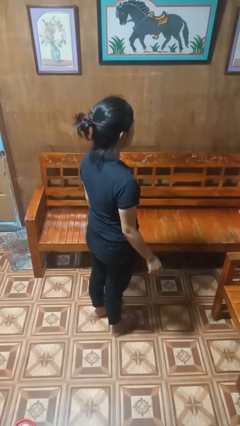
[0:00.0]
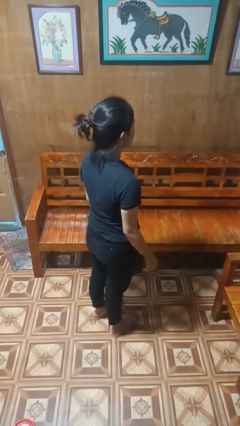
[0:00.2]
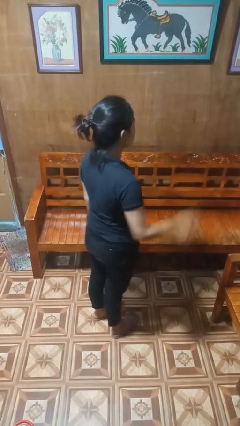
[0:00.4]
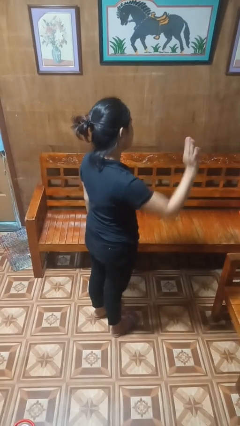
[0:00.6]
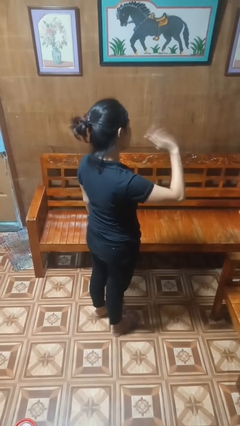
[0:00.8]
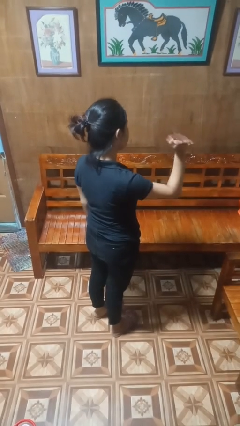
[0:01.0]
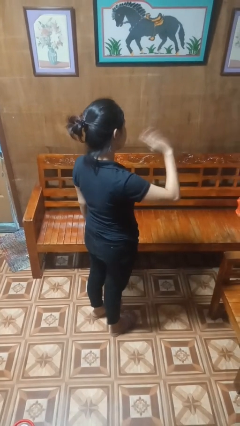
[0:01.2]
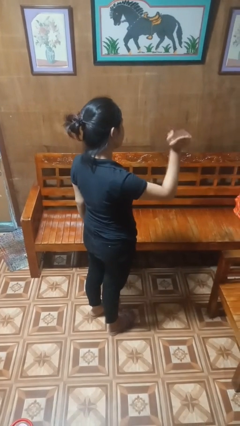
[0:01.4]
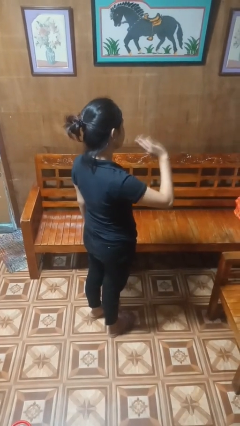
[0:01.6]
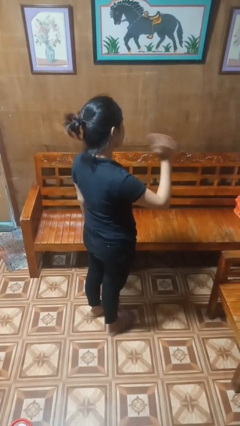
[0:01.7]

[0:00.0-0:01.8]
person waves at person

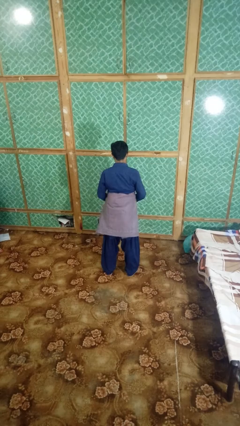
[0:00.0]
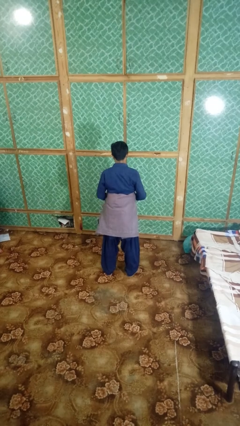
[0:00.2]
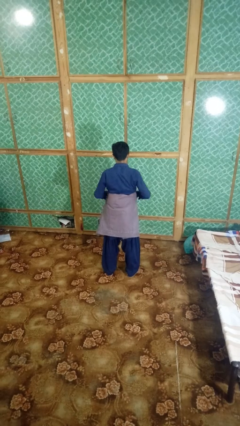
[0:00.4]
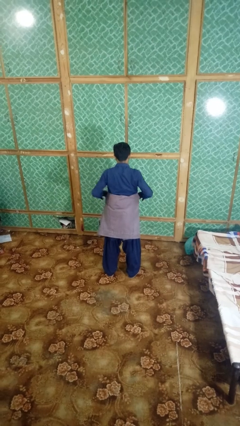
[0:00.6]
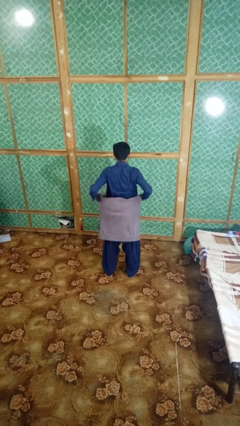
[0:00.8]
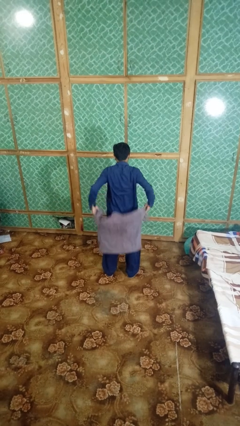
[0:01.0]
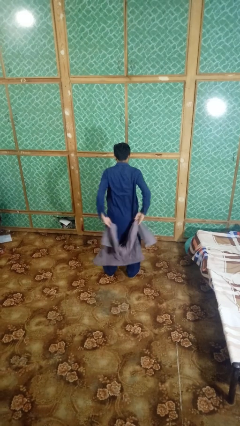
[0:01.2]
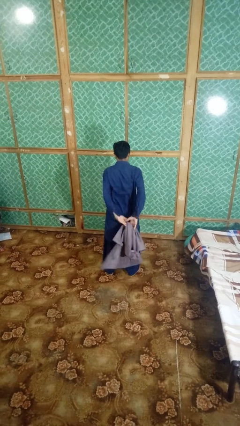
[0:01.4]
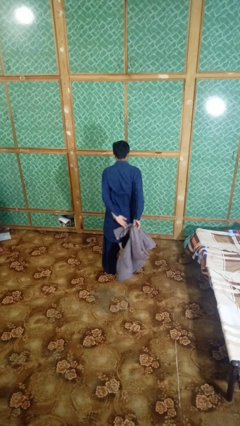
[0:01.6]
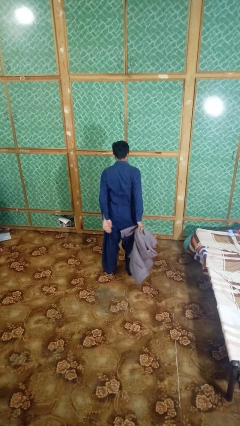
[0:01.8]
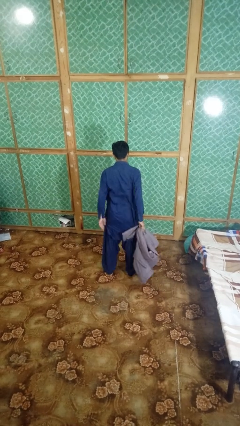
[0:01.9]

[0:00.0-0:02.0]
person unties jacket around waist

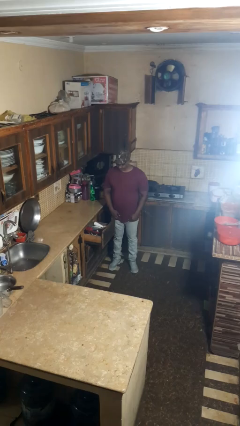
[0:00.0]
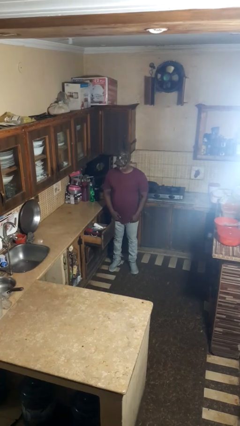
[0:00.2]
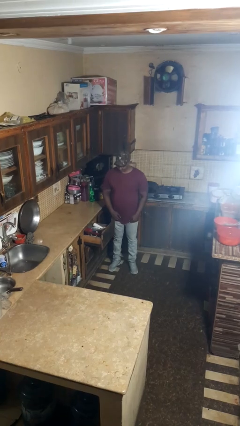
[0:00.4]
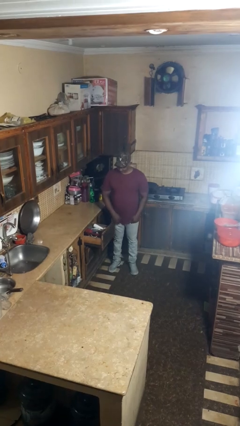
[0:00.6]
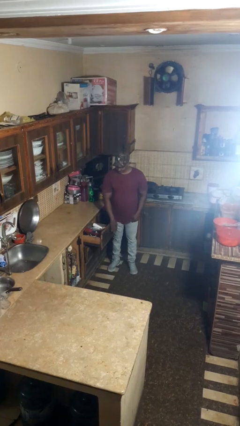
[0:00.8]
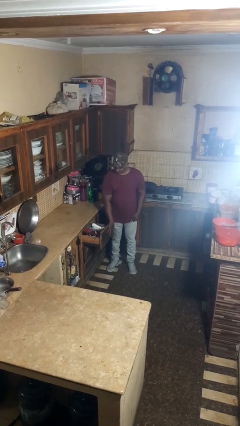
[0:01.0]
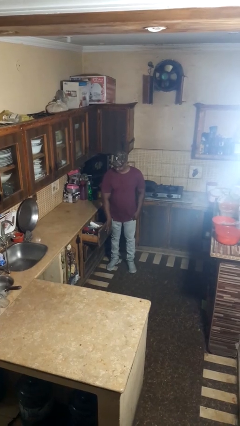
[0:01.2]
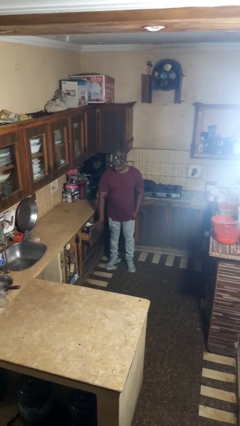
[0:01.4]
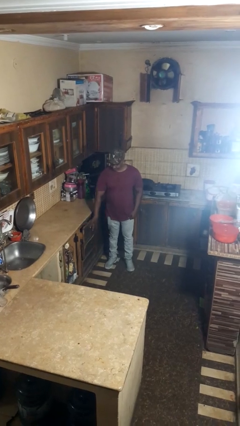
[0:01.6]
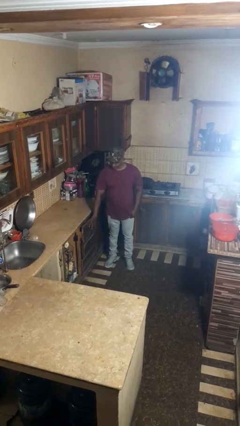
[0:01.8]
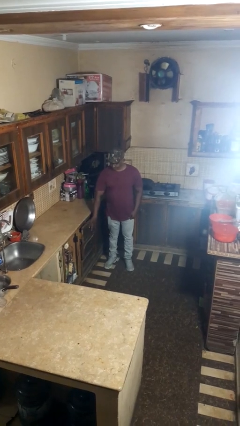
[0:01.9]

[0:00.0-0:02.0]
person closes kitchen drawer

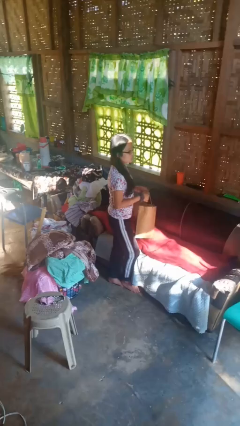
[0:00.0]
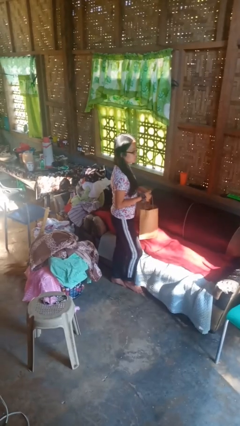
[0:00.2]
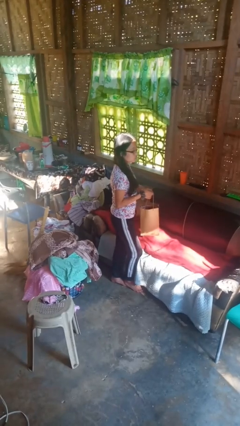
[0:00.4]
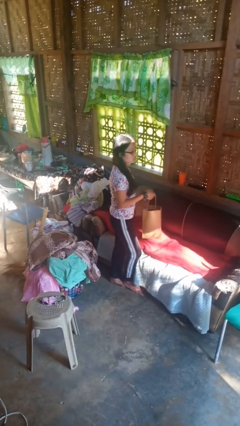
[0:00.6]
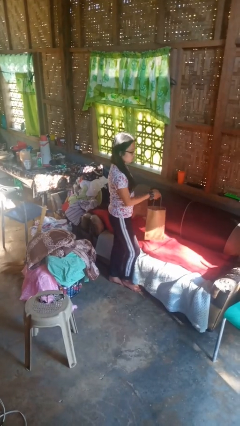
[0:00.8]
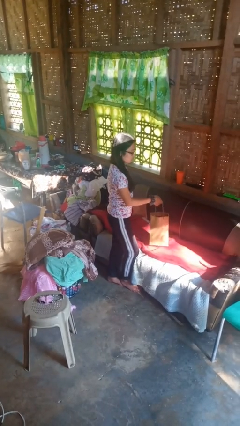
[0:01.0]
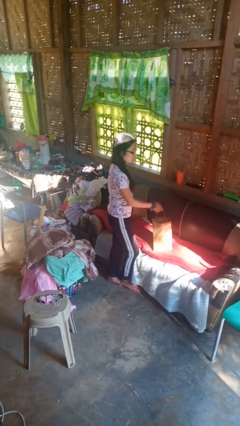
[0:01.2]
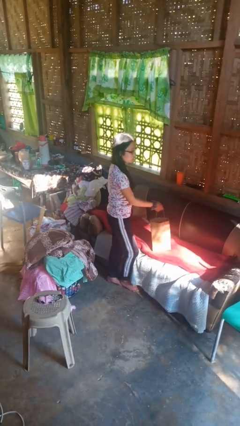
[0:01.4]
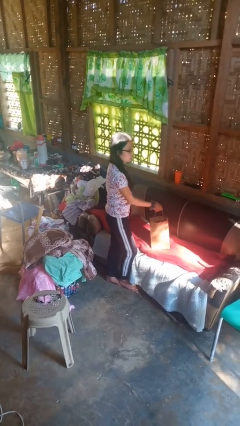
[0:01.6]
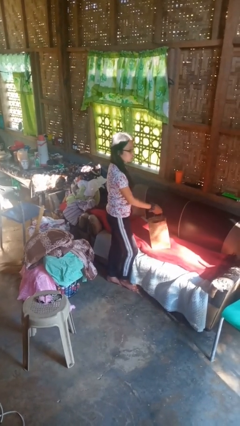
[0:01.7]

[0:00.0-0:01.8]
person puts down object on couch

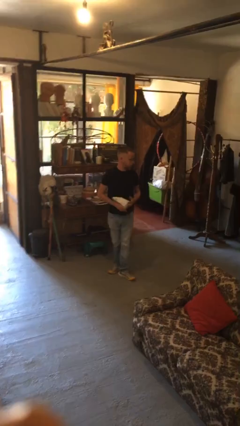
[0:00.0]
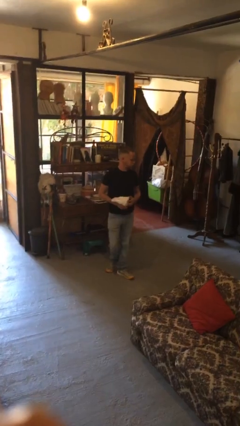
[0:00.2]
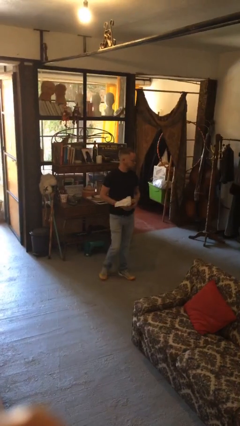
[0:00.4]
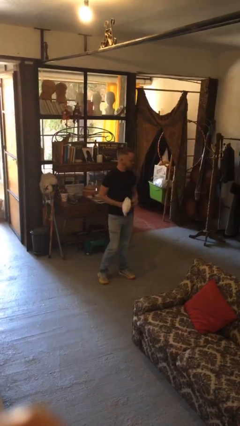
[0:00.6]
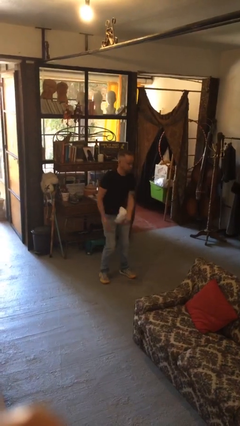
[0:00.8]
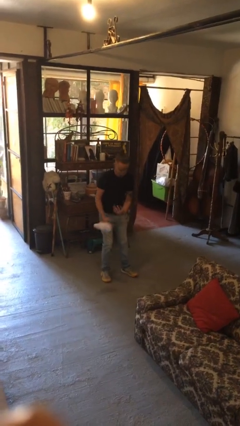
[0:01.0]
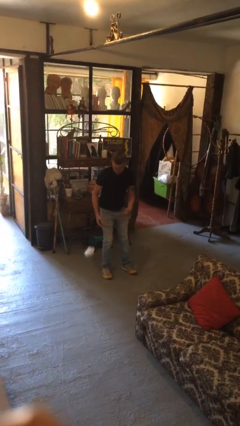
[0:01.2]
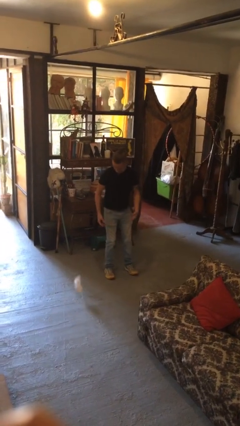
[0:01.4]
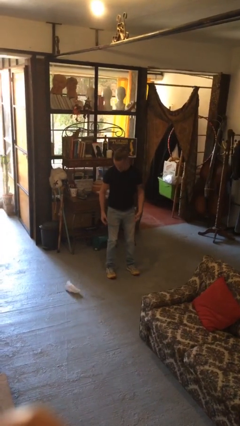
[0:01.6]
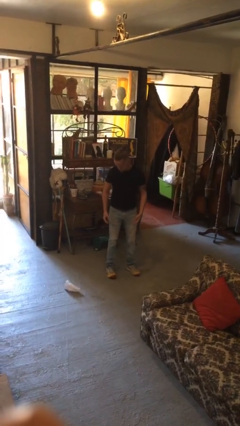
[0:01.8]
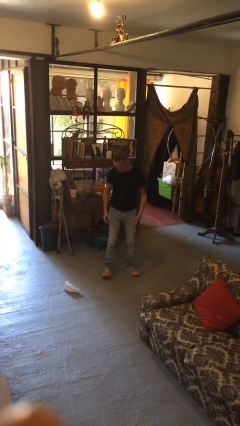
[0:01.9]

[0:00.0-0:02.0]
person drops object

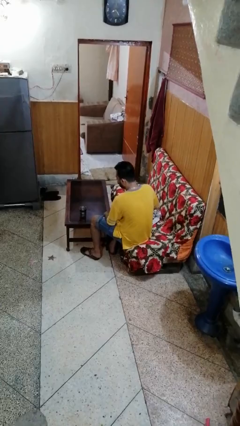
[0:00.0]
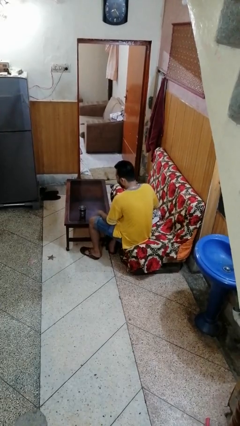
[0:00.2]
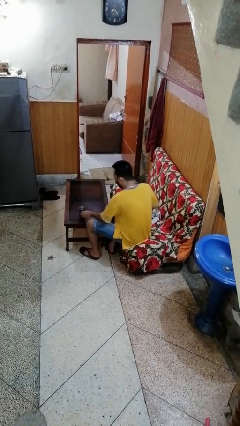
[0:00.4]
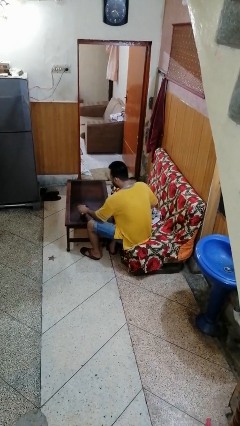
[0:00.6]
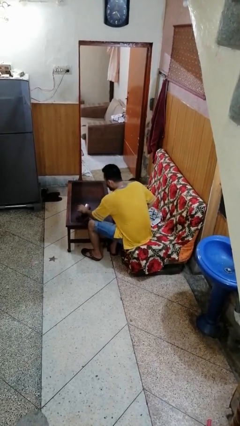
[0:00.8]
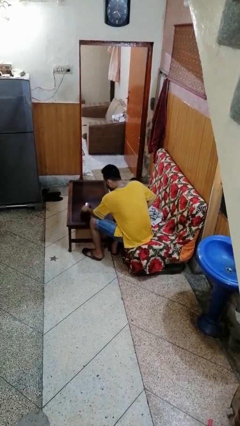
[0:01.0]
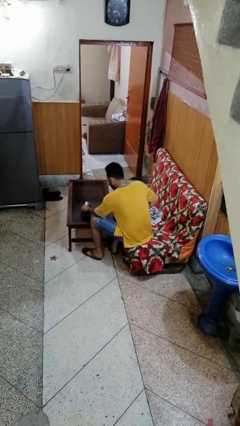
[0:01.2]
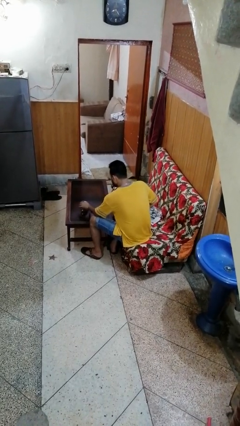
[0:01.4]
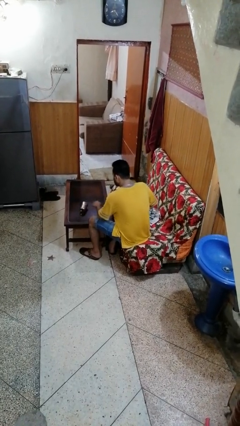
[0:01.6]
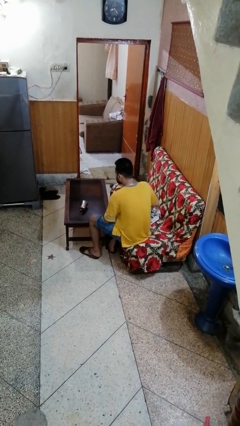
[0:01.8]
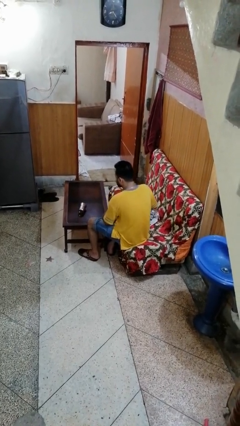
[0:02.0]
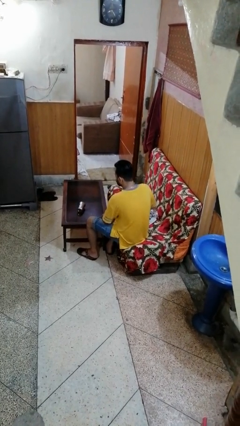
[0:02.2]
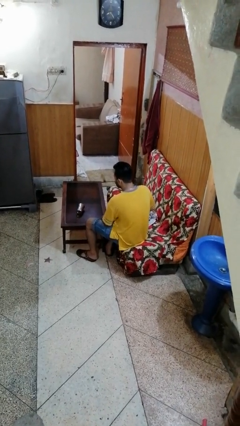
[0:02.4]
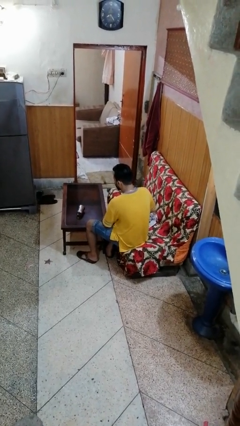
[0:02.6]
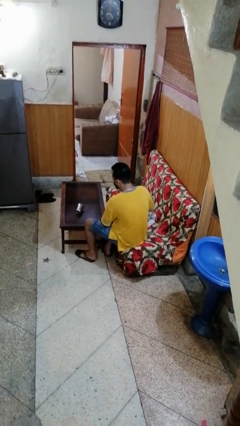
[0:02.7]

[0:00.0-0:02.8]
person knocks over glass

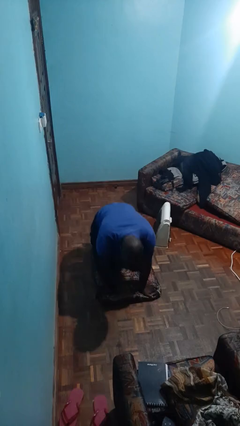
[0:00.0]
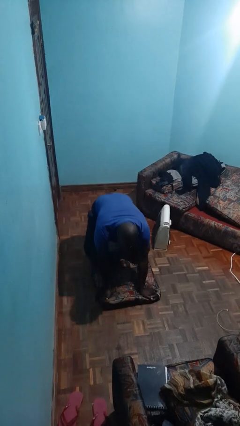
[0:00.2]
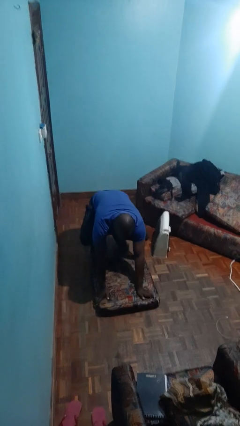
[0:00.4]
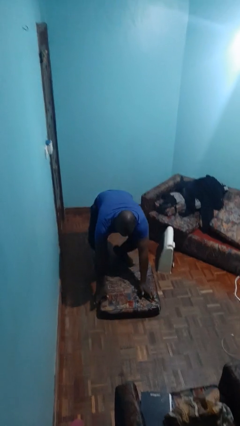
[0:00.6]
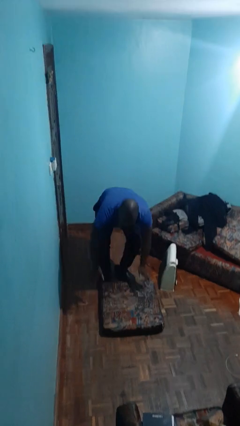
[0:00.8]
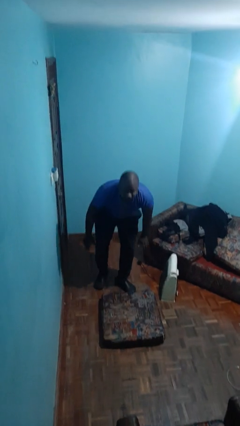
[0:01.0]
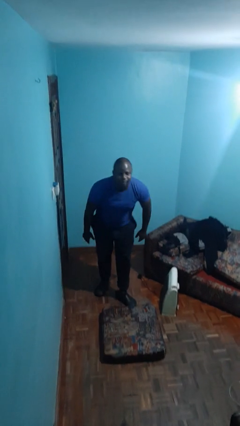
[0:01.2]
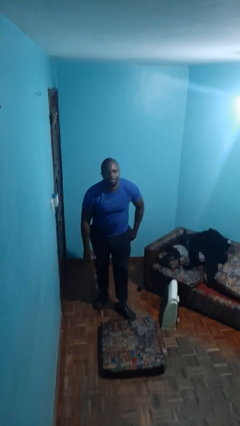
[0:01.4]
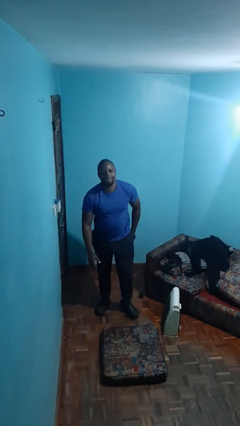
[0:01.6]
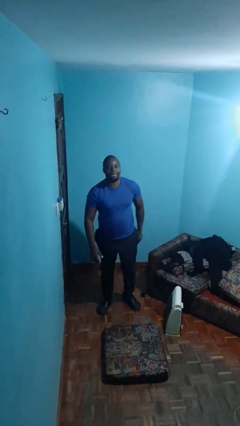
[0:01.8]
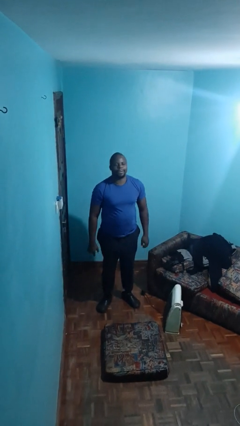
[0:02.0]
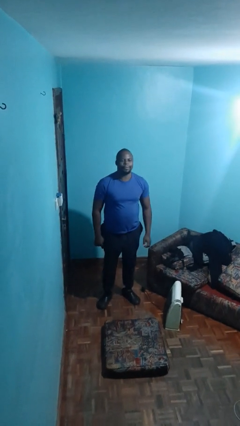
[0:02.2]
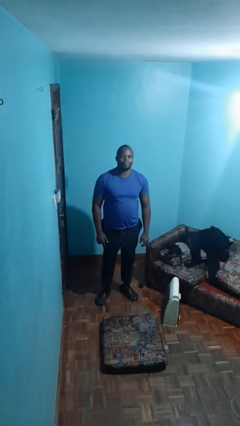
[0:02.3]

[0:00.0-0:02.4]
person stands up from floor

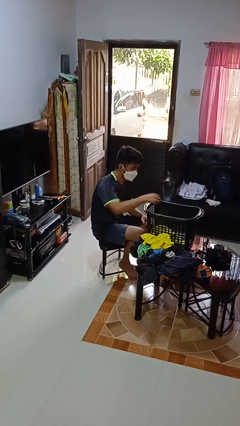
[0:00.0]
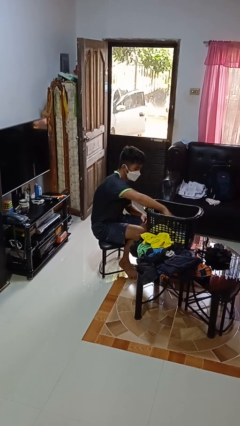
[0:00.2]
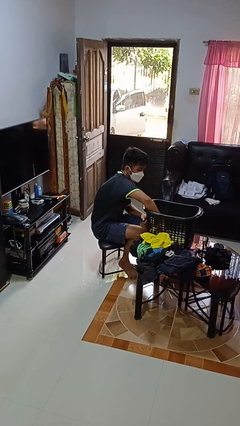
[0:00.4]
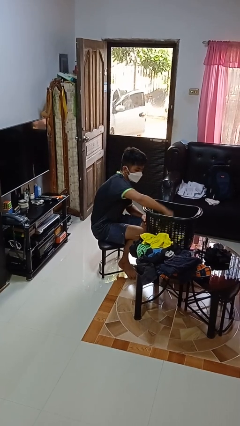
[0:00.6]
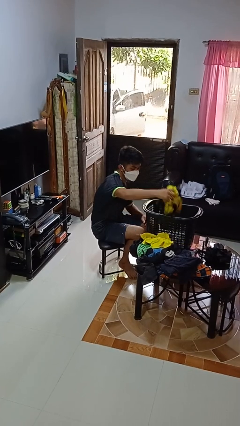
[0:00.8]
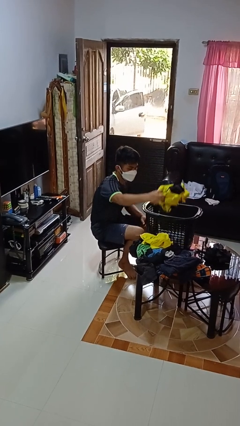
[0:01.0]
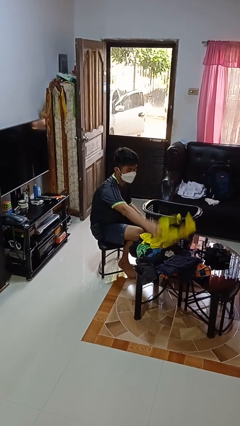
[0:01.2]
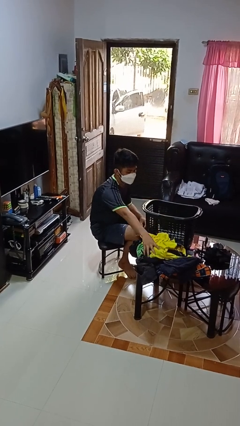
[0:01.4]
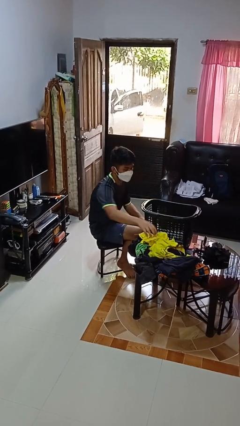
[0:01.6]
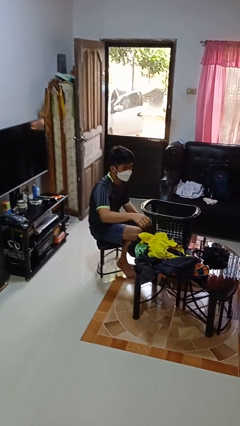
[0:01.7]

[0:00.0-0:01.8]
person takes object from basket

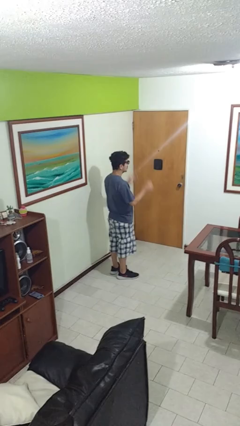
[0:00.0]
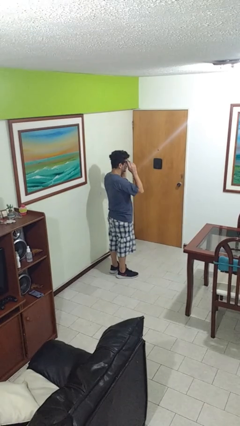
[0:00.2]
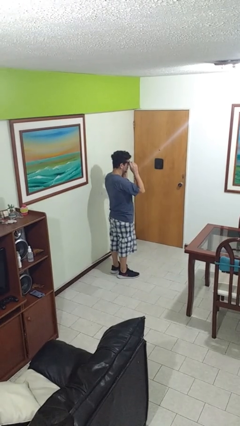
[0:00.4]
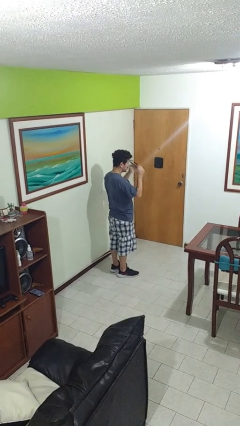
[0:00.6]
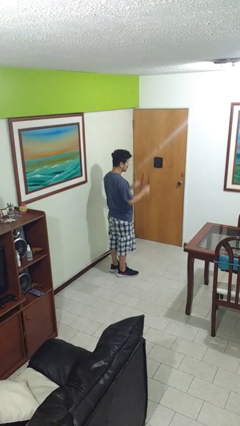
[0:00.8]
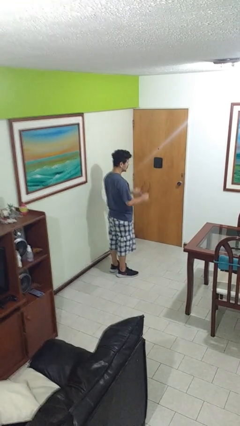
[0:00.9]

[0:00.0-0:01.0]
person takes off sunglasses
